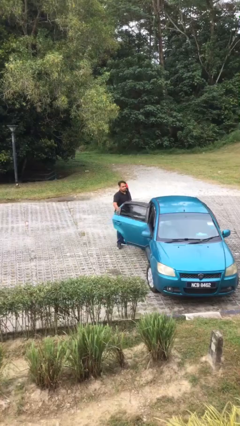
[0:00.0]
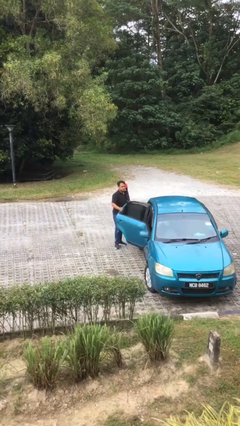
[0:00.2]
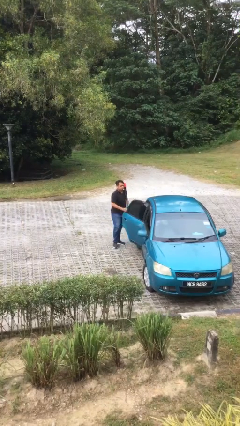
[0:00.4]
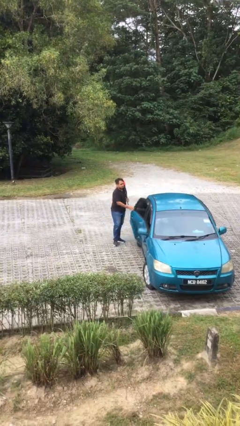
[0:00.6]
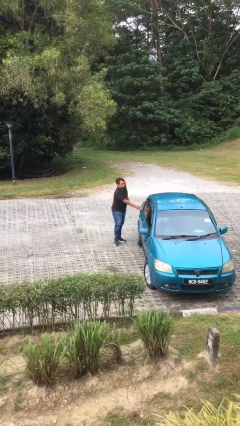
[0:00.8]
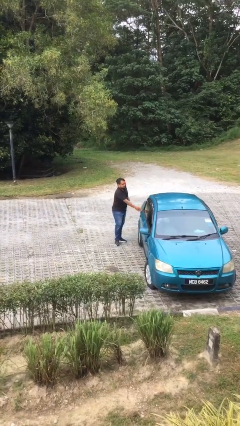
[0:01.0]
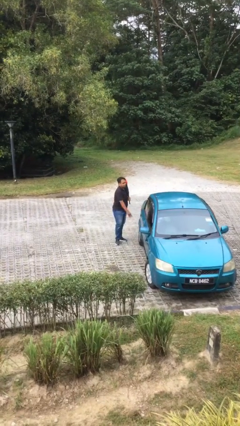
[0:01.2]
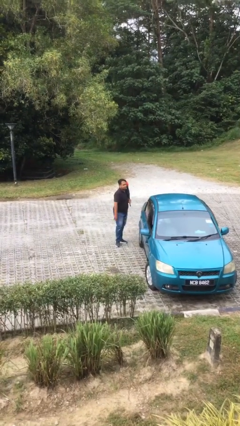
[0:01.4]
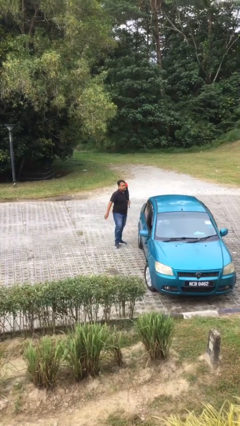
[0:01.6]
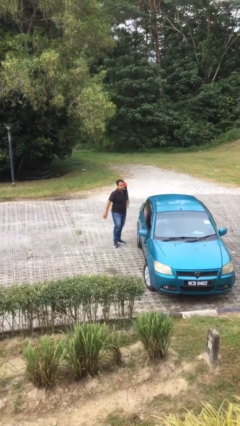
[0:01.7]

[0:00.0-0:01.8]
person closes car door

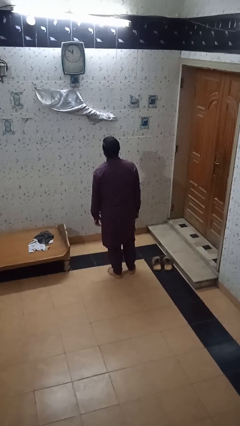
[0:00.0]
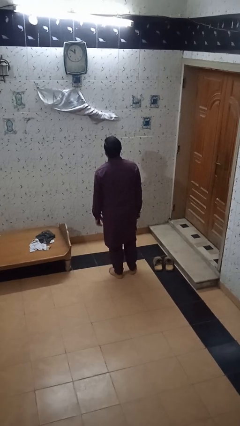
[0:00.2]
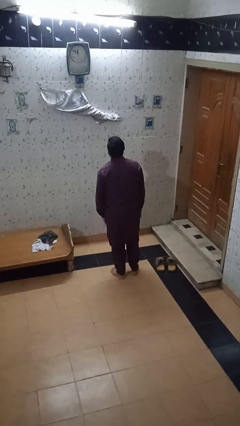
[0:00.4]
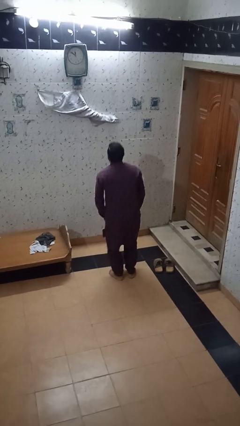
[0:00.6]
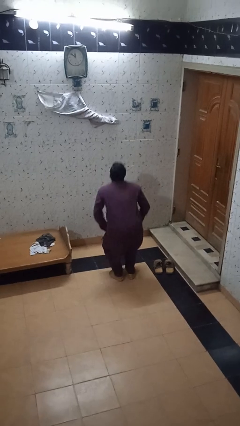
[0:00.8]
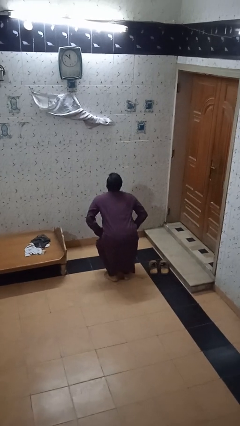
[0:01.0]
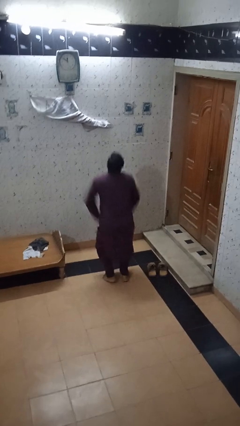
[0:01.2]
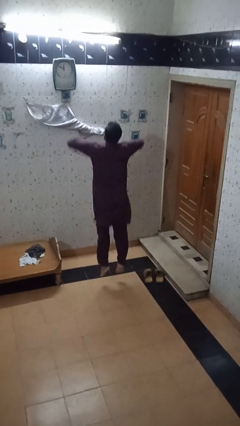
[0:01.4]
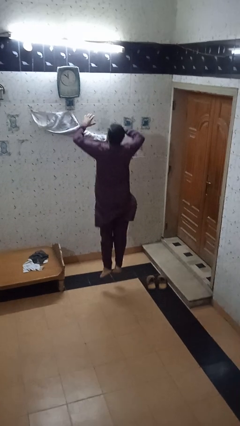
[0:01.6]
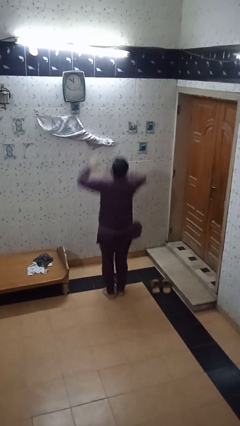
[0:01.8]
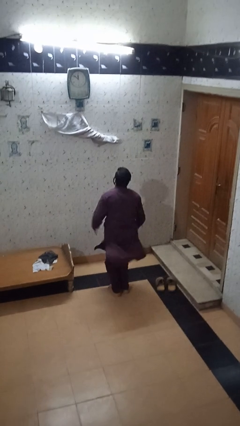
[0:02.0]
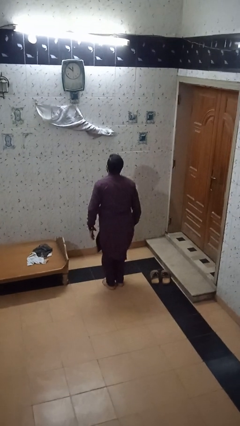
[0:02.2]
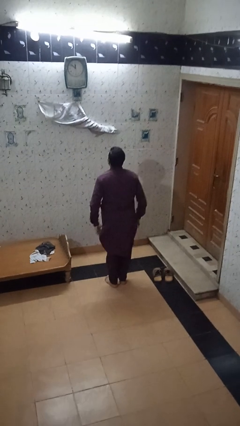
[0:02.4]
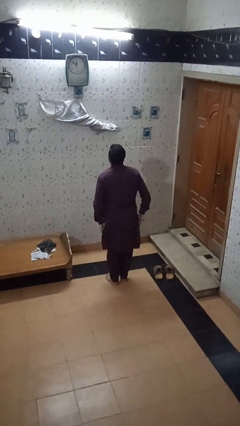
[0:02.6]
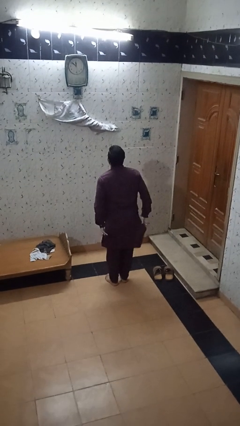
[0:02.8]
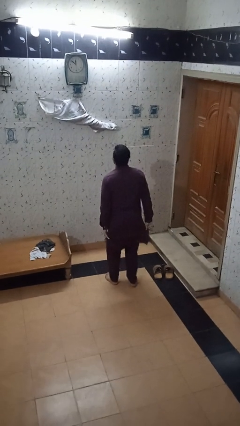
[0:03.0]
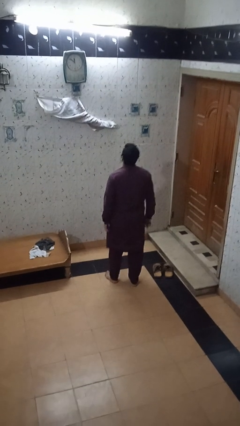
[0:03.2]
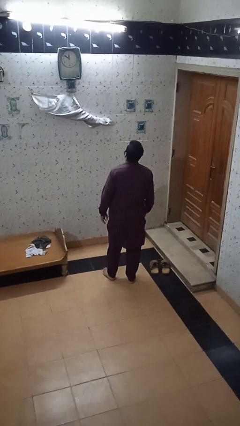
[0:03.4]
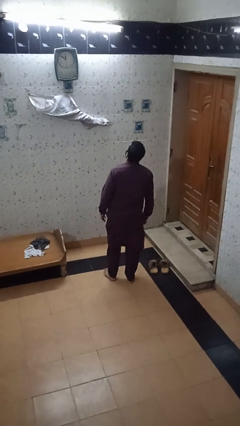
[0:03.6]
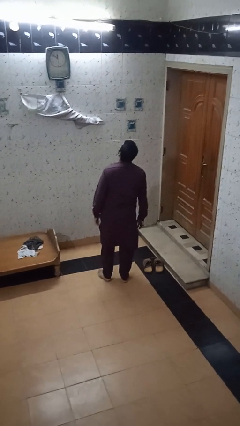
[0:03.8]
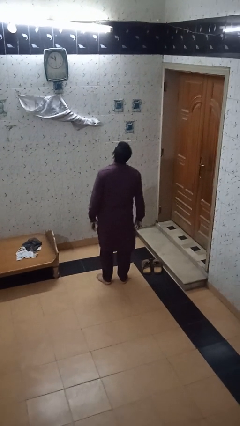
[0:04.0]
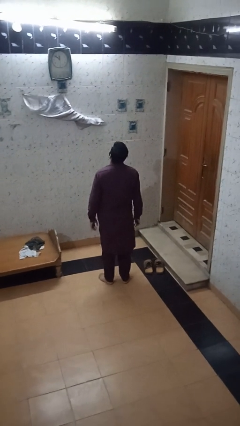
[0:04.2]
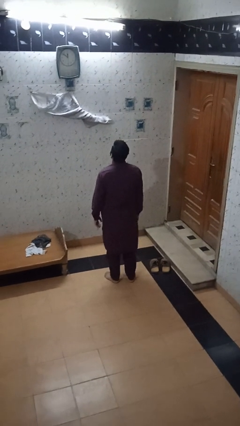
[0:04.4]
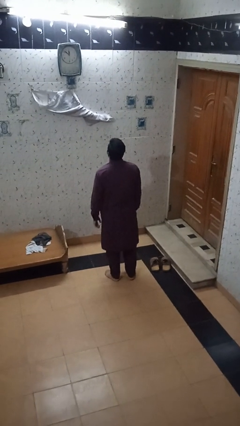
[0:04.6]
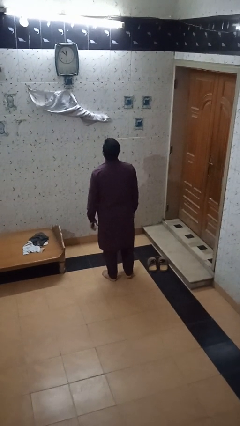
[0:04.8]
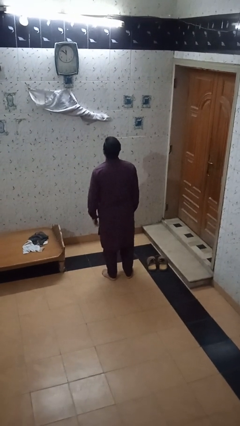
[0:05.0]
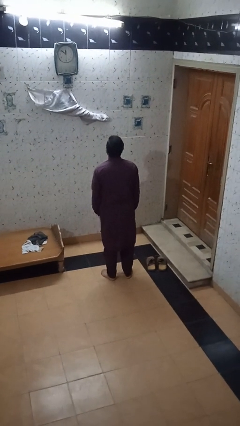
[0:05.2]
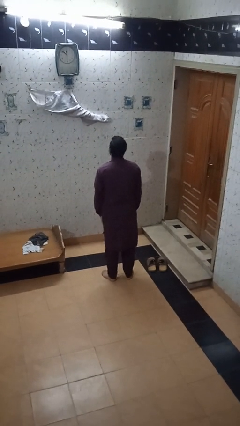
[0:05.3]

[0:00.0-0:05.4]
person jumps

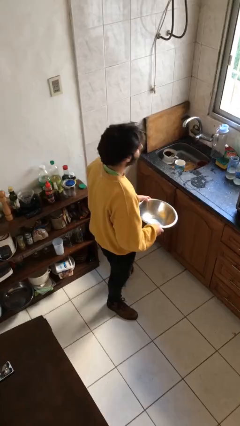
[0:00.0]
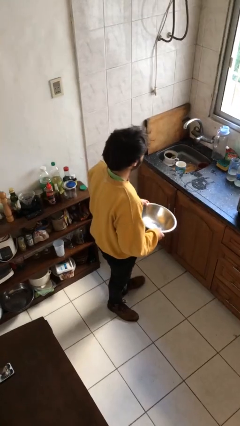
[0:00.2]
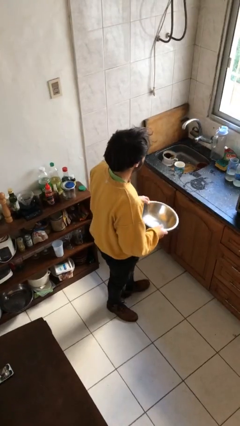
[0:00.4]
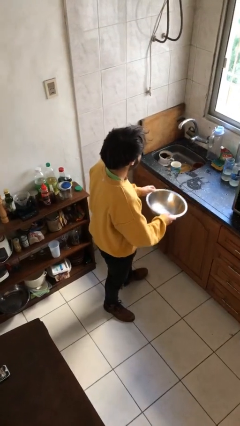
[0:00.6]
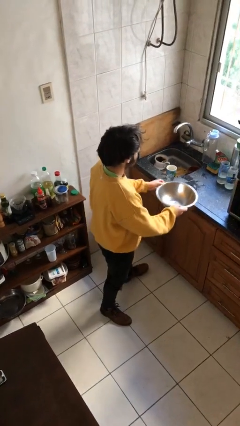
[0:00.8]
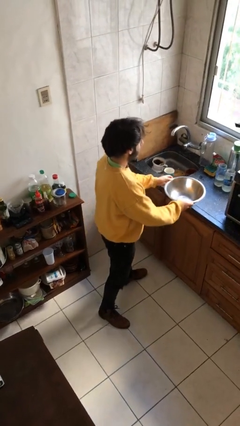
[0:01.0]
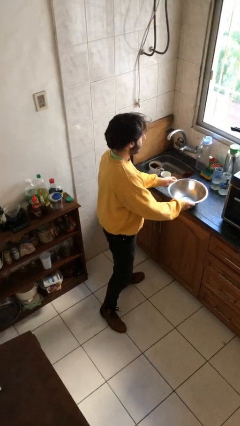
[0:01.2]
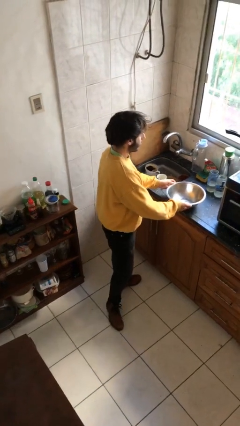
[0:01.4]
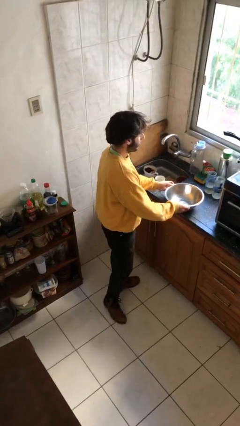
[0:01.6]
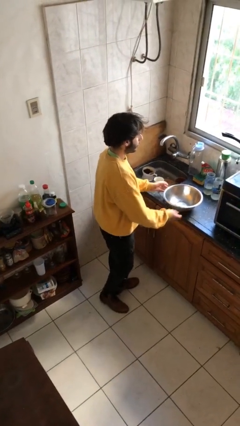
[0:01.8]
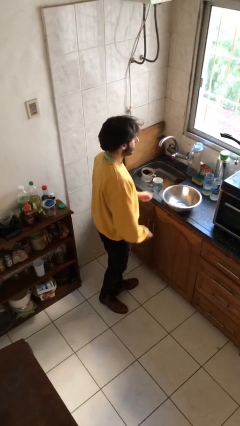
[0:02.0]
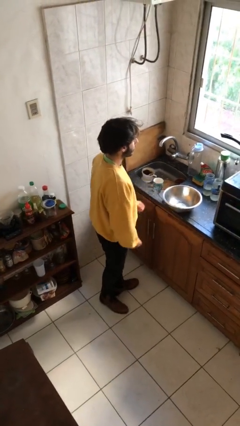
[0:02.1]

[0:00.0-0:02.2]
person puts down object on countertop

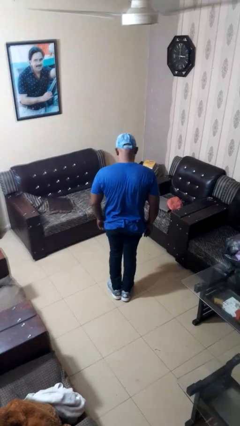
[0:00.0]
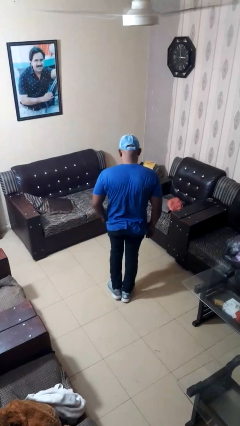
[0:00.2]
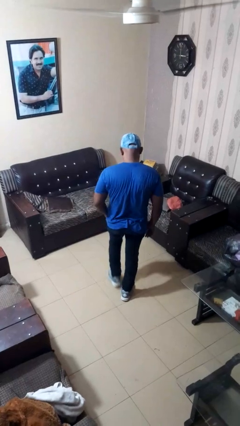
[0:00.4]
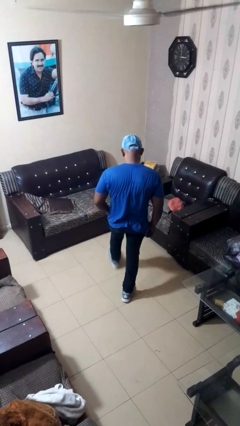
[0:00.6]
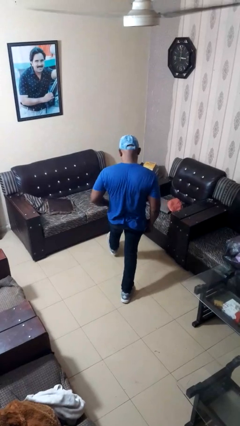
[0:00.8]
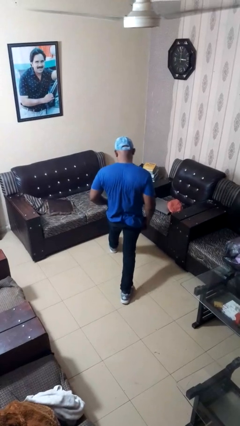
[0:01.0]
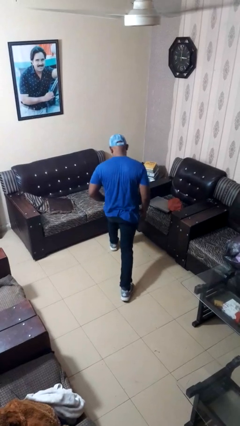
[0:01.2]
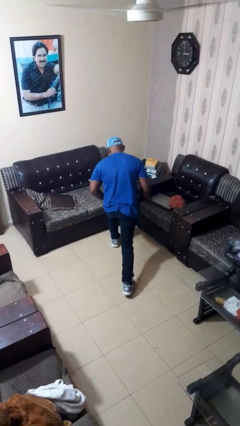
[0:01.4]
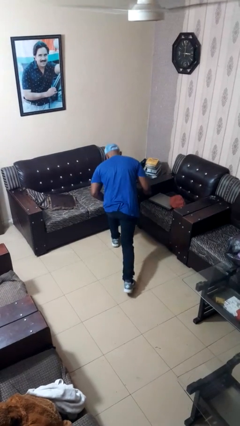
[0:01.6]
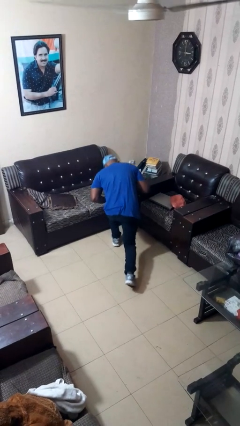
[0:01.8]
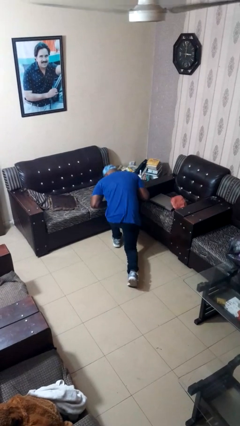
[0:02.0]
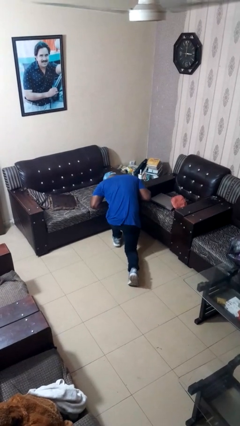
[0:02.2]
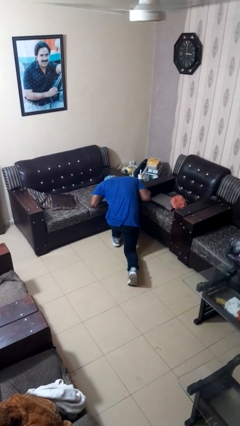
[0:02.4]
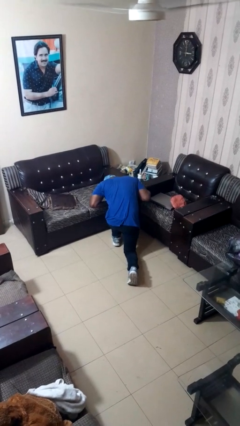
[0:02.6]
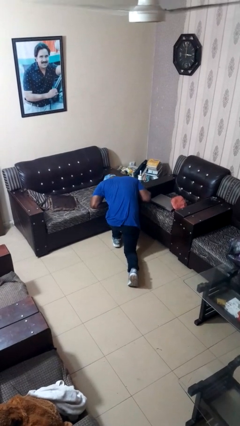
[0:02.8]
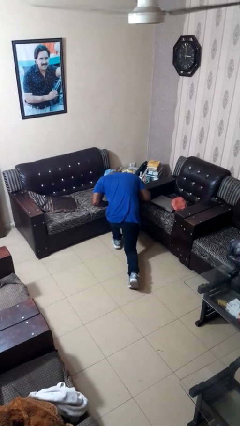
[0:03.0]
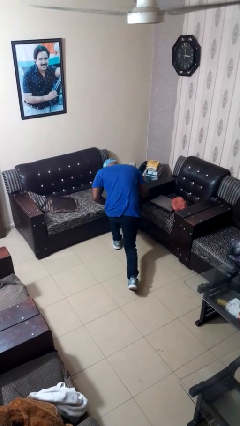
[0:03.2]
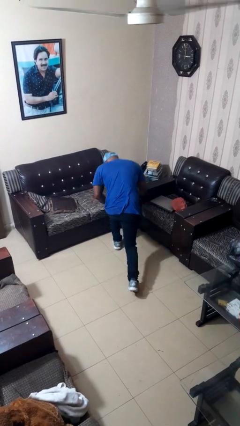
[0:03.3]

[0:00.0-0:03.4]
person exercises with lunges

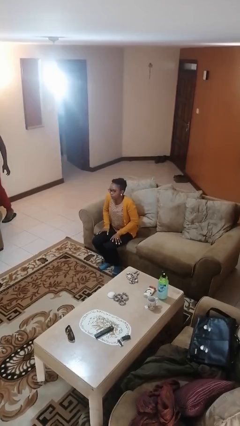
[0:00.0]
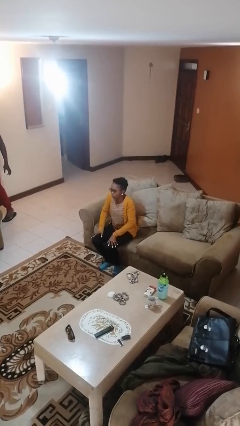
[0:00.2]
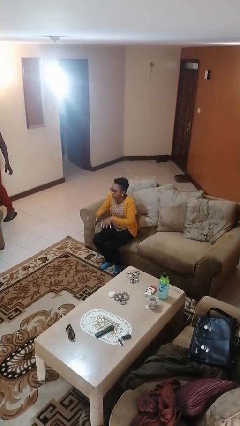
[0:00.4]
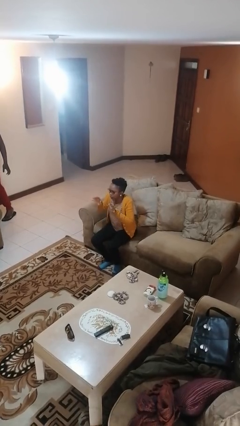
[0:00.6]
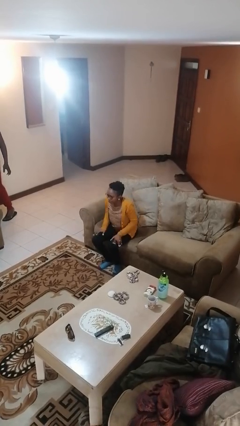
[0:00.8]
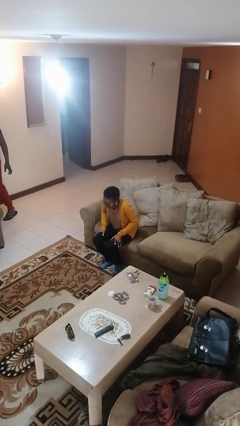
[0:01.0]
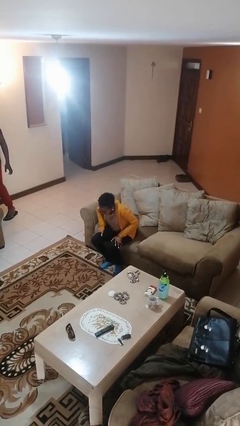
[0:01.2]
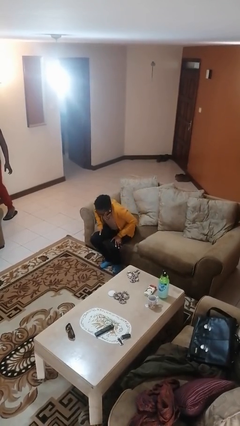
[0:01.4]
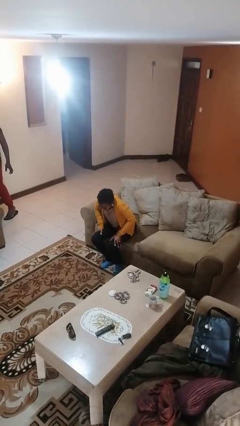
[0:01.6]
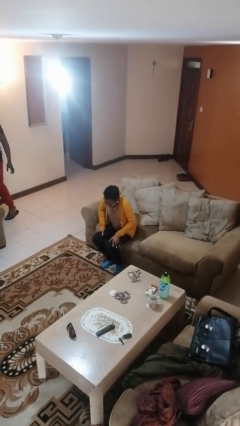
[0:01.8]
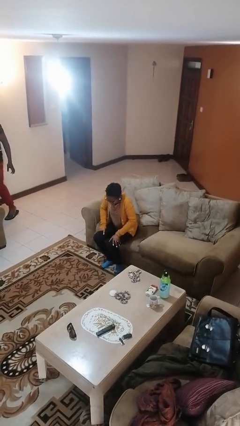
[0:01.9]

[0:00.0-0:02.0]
person slaps hands on thighs

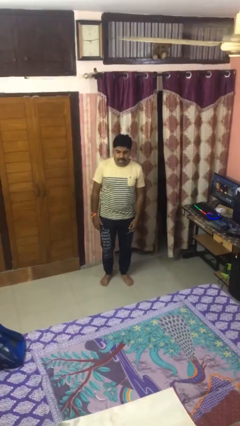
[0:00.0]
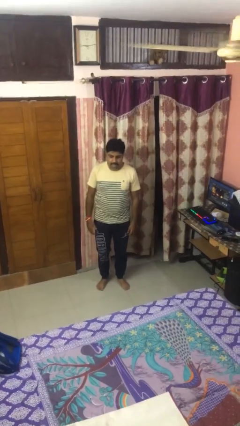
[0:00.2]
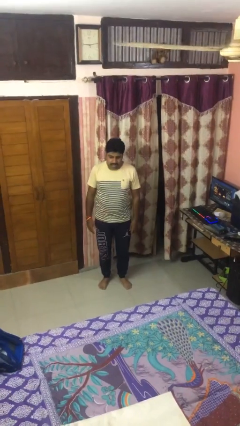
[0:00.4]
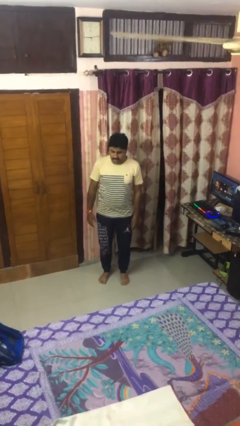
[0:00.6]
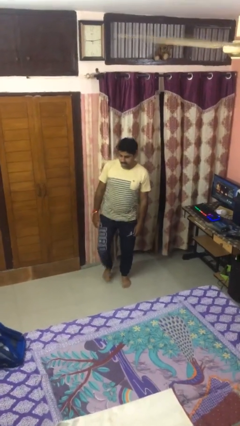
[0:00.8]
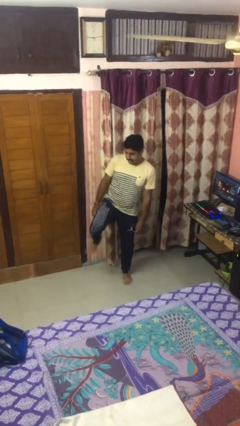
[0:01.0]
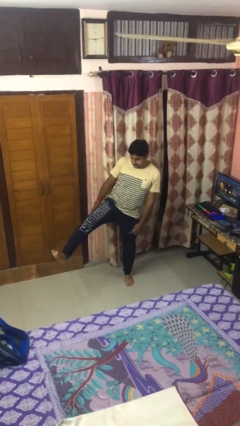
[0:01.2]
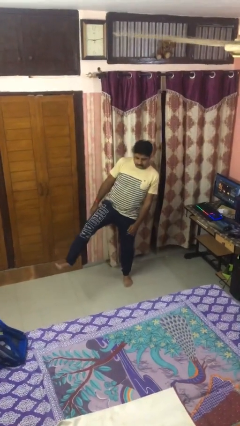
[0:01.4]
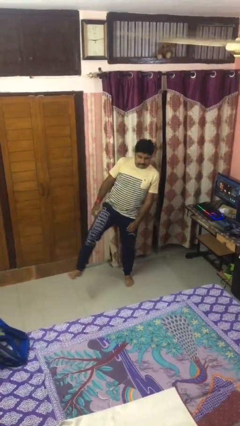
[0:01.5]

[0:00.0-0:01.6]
person karate kicks

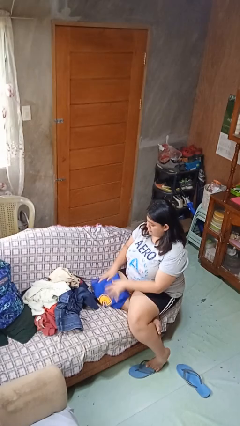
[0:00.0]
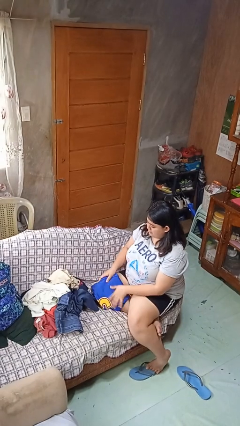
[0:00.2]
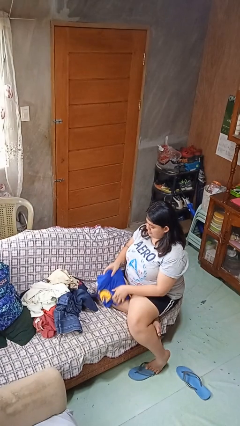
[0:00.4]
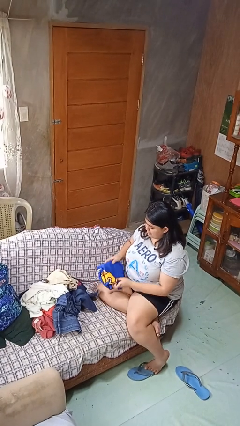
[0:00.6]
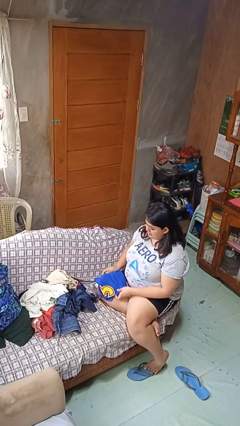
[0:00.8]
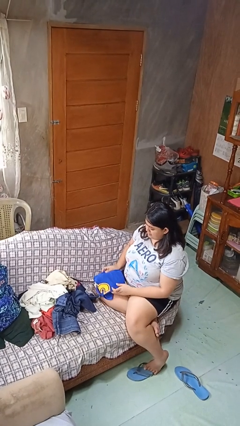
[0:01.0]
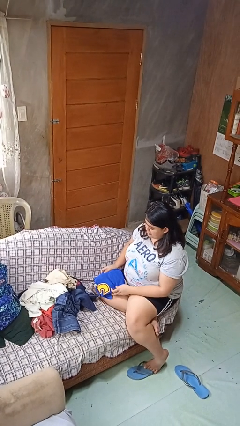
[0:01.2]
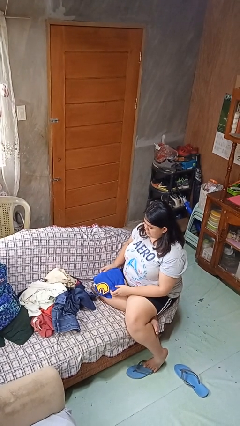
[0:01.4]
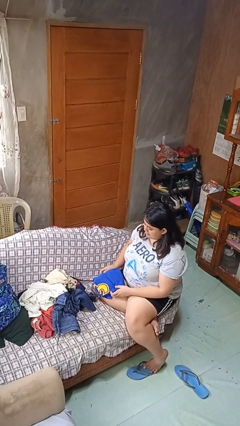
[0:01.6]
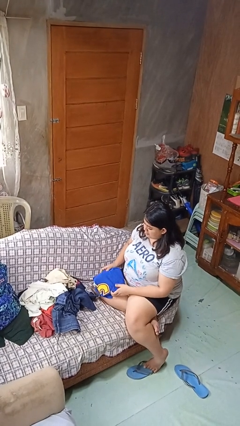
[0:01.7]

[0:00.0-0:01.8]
person folds shirt
